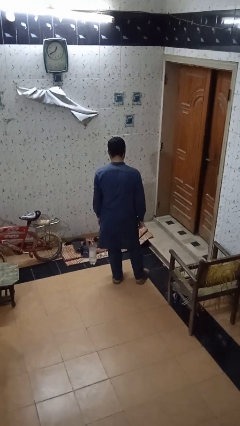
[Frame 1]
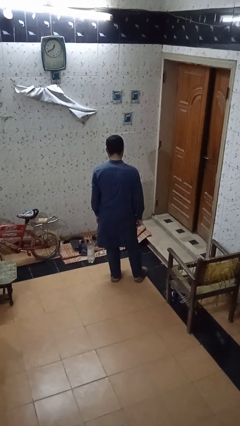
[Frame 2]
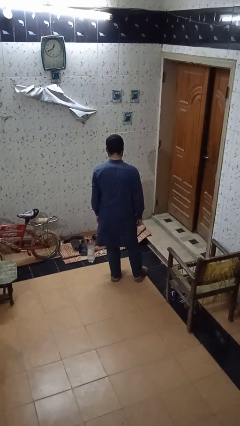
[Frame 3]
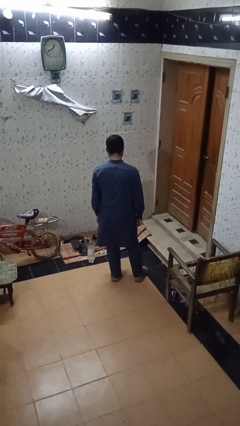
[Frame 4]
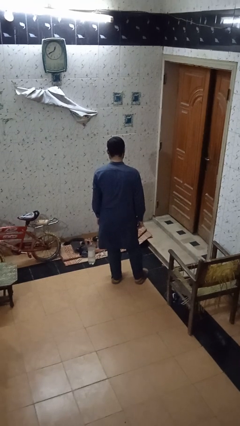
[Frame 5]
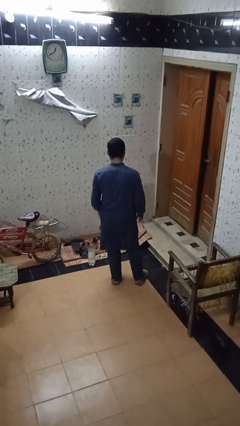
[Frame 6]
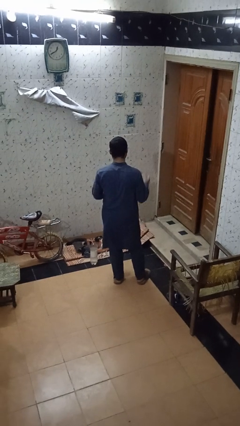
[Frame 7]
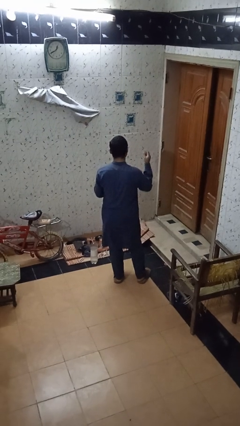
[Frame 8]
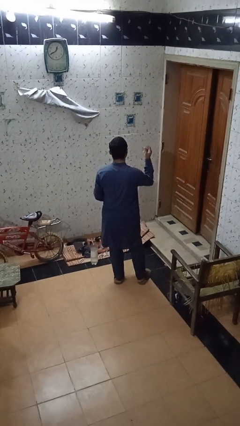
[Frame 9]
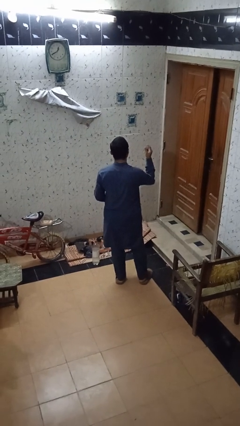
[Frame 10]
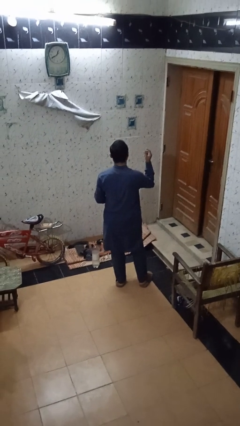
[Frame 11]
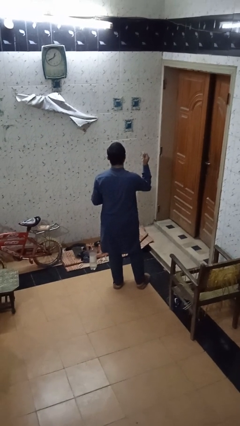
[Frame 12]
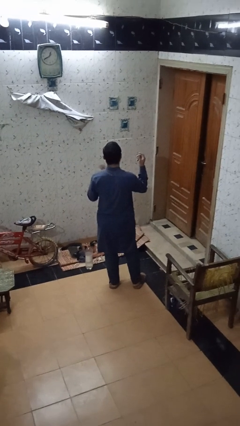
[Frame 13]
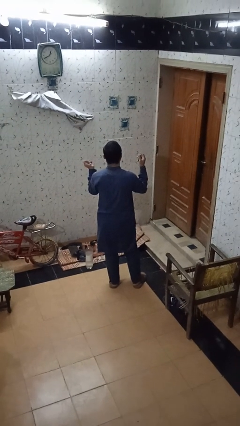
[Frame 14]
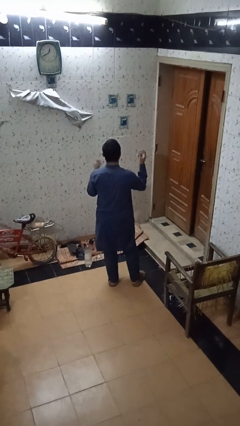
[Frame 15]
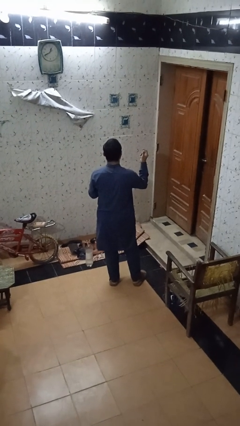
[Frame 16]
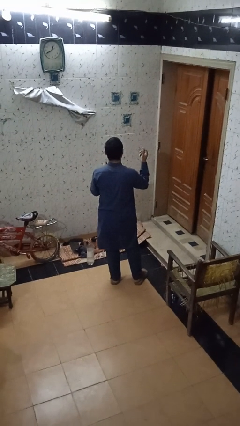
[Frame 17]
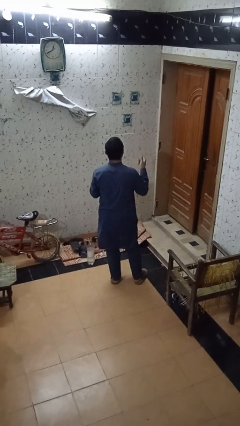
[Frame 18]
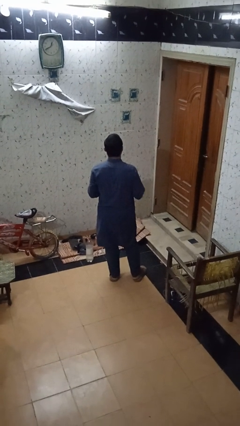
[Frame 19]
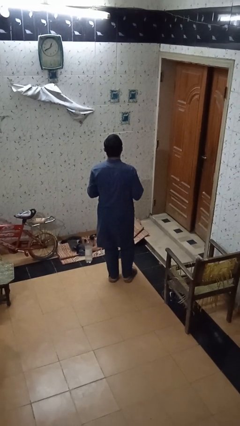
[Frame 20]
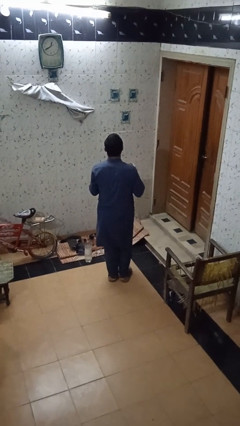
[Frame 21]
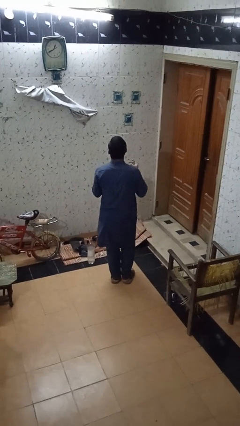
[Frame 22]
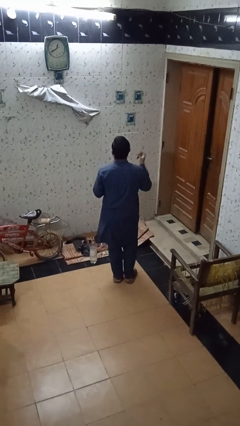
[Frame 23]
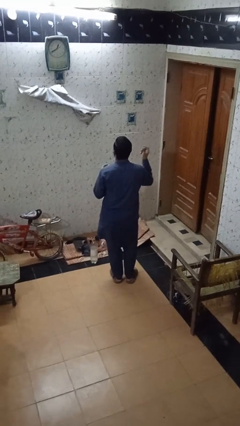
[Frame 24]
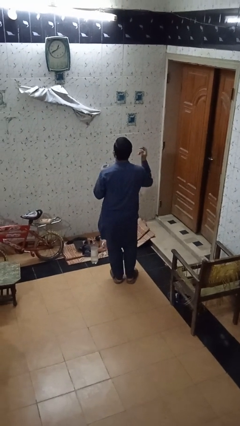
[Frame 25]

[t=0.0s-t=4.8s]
person snaps fingers

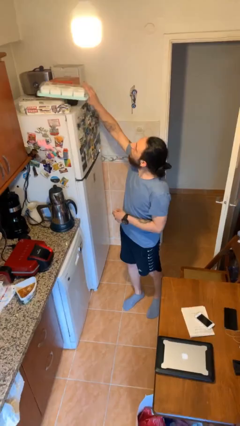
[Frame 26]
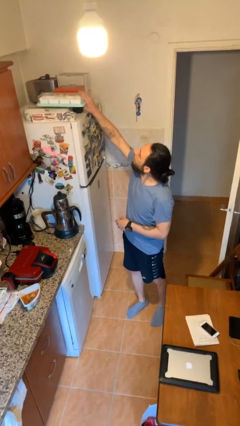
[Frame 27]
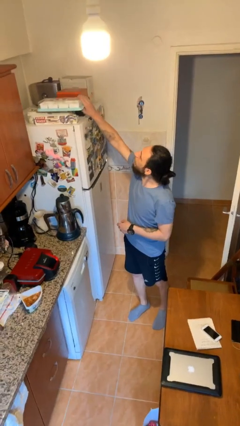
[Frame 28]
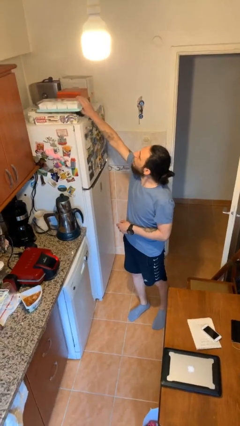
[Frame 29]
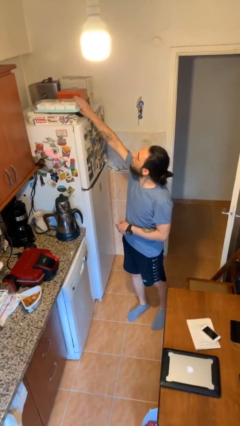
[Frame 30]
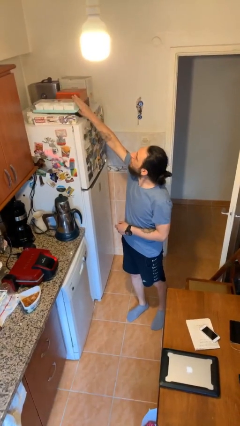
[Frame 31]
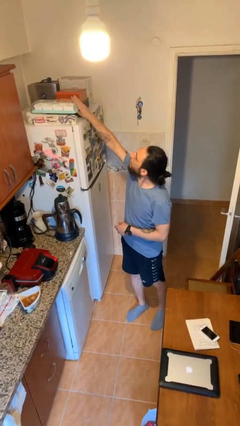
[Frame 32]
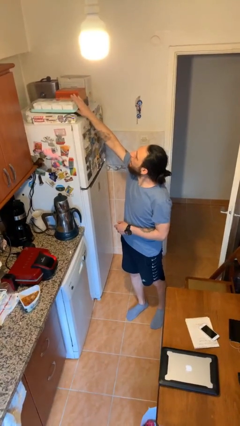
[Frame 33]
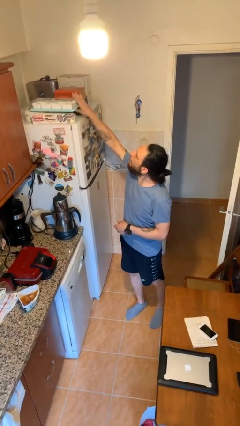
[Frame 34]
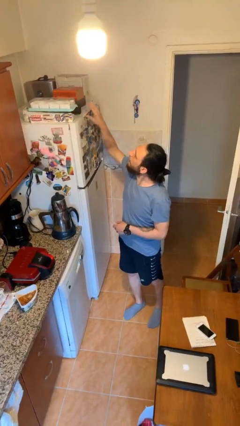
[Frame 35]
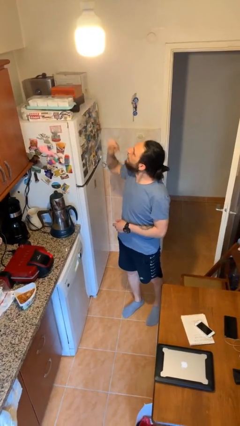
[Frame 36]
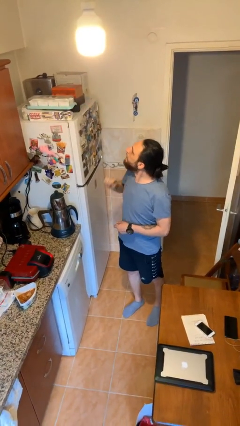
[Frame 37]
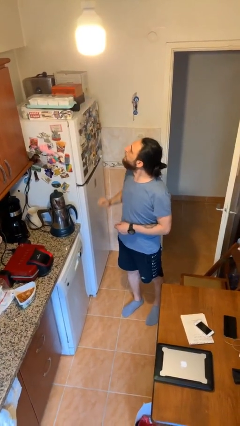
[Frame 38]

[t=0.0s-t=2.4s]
person puts down object on shelf

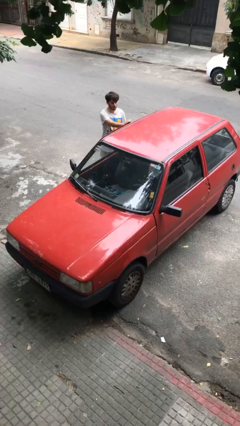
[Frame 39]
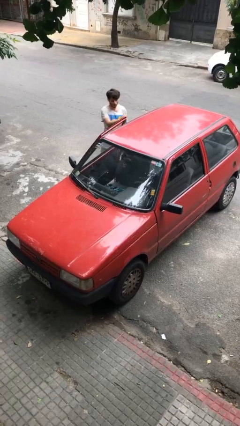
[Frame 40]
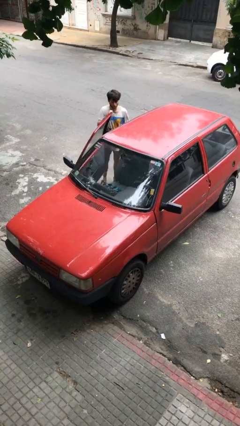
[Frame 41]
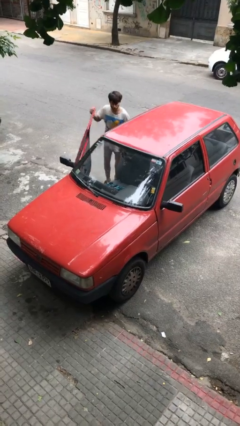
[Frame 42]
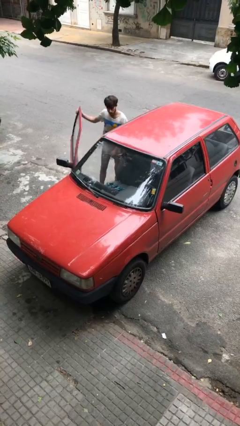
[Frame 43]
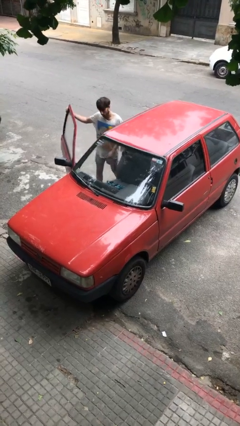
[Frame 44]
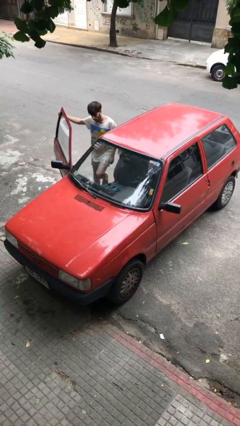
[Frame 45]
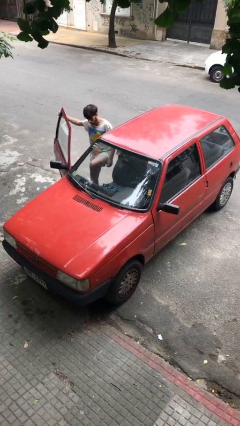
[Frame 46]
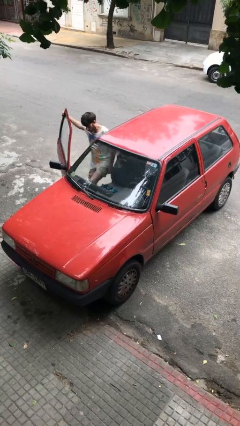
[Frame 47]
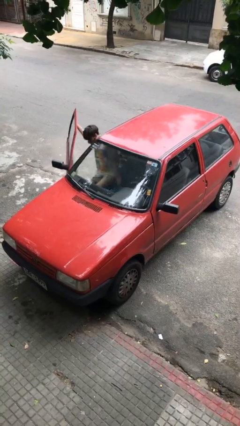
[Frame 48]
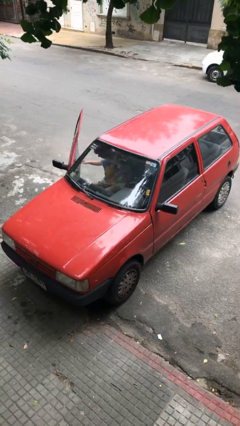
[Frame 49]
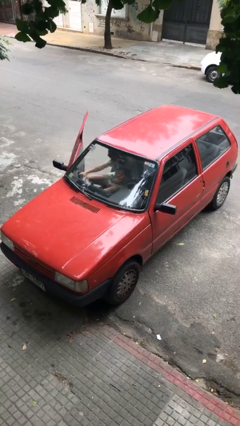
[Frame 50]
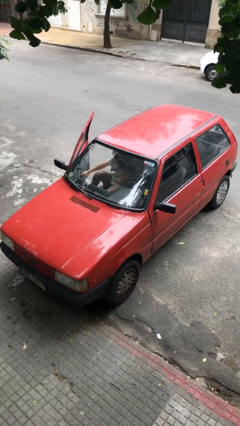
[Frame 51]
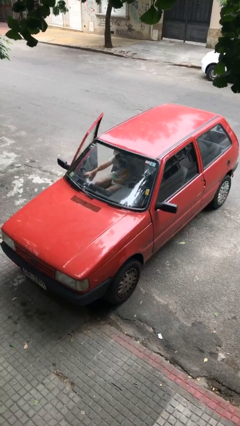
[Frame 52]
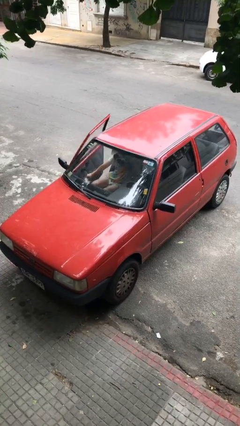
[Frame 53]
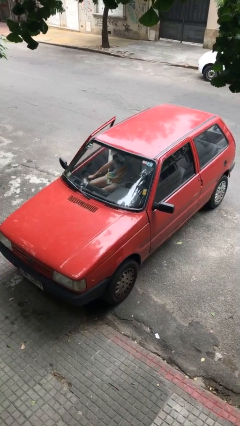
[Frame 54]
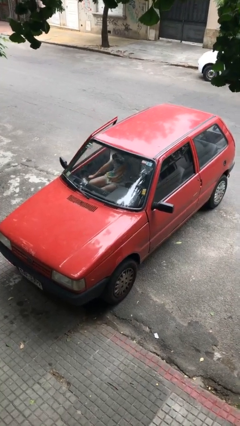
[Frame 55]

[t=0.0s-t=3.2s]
car picks up person

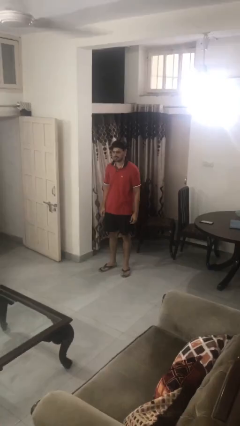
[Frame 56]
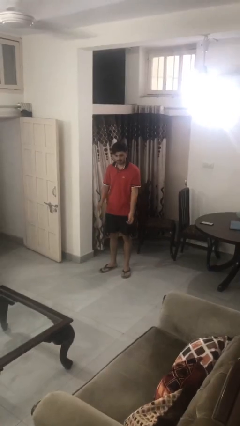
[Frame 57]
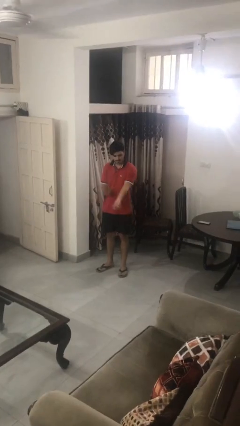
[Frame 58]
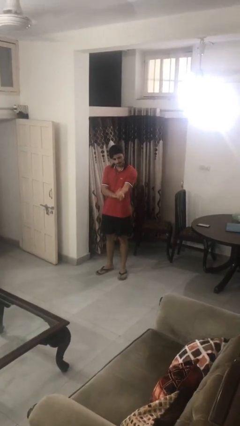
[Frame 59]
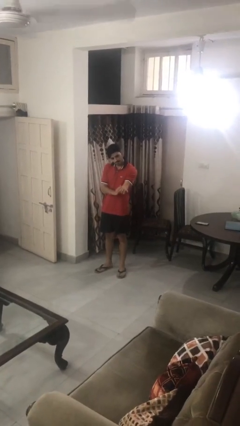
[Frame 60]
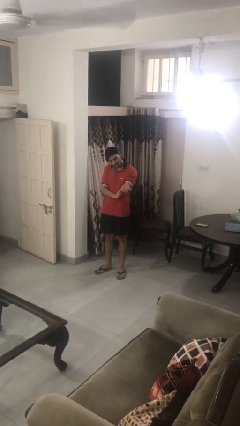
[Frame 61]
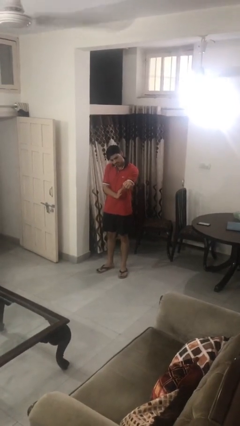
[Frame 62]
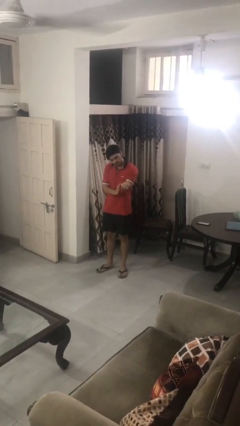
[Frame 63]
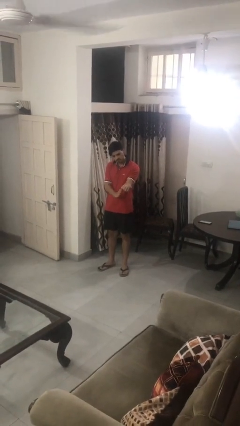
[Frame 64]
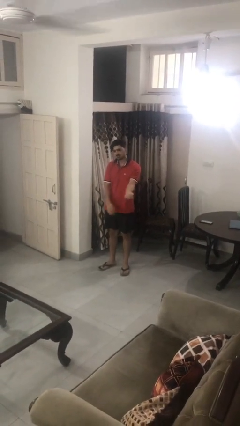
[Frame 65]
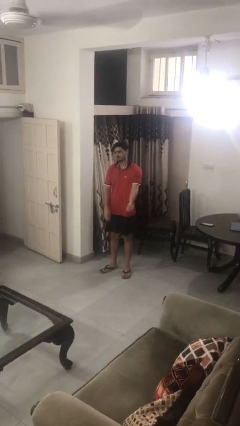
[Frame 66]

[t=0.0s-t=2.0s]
person swats bug

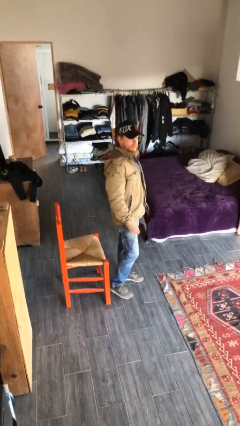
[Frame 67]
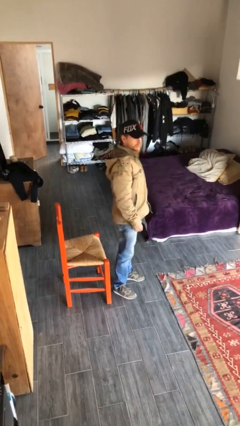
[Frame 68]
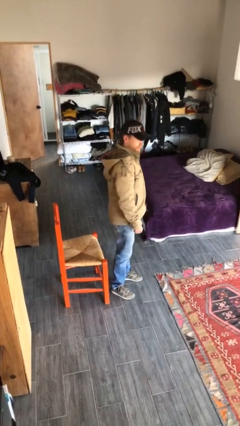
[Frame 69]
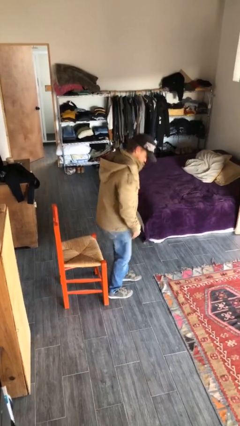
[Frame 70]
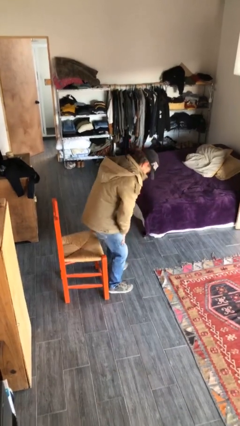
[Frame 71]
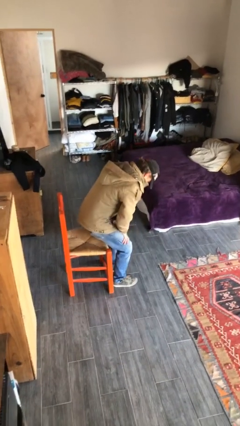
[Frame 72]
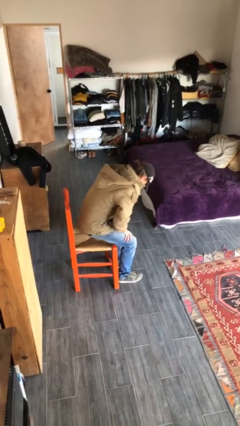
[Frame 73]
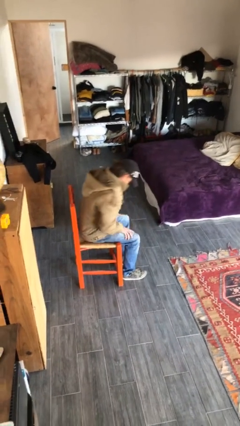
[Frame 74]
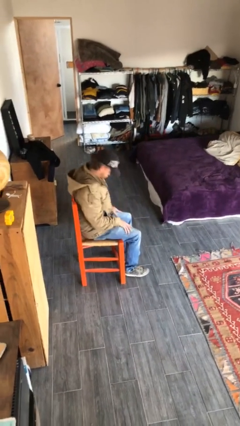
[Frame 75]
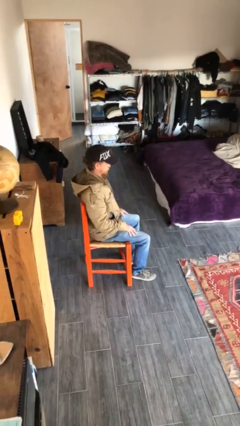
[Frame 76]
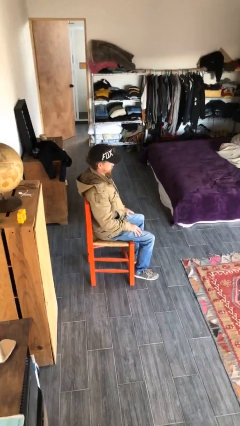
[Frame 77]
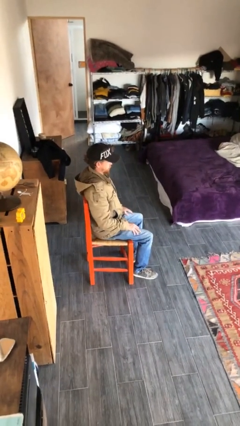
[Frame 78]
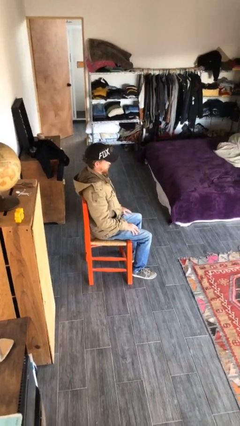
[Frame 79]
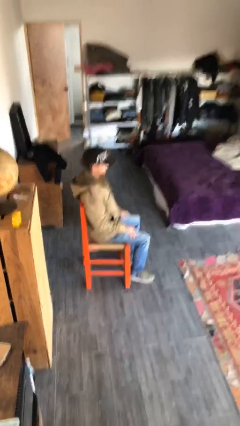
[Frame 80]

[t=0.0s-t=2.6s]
person sits down

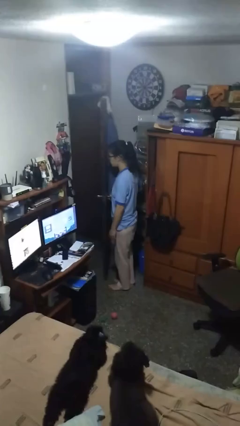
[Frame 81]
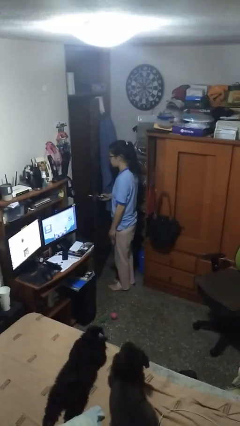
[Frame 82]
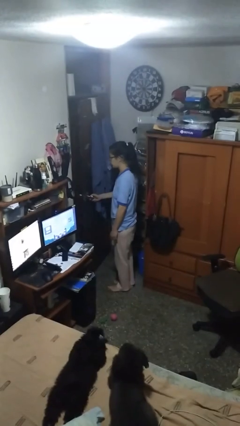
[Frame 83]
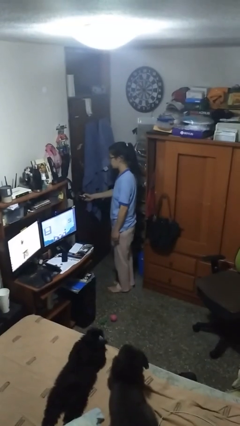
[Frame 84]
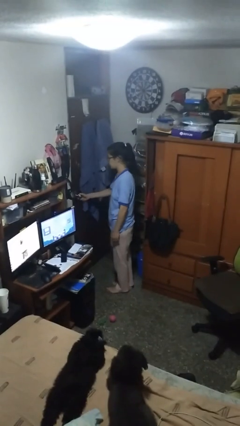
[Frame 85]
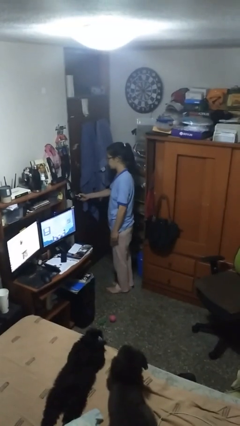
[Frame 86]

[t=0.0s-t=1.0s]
person closes facility door

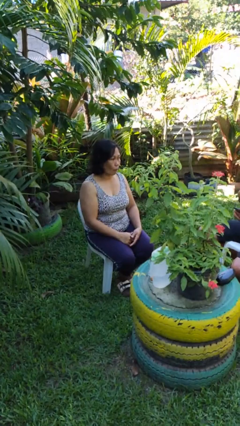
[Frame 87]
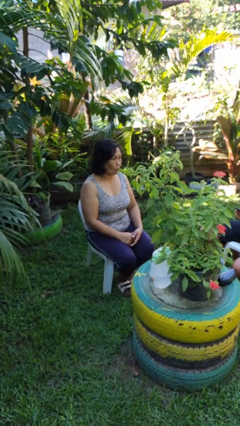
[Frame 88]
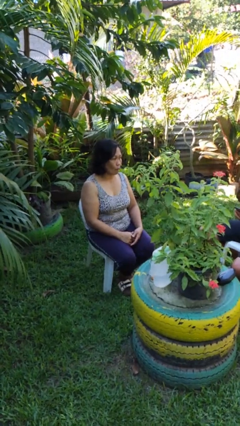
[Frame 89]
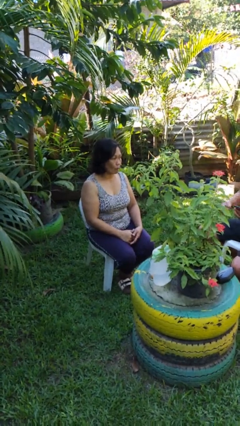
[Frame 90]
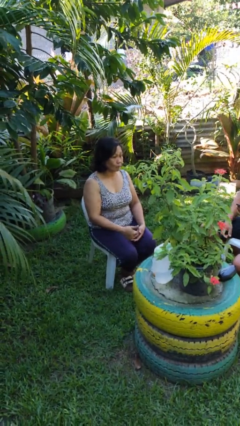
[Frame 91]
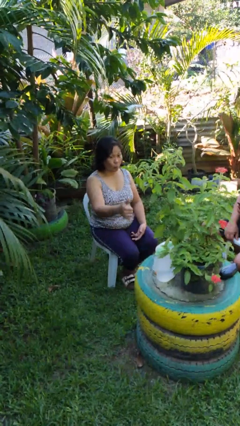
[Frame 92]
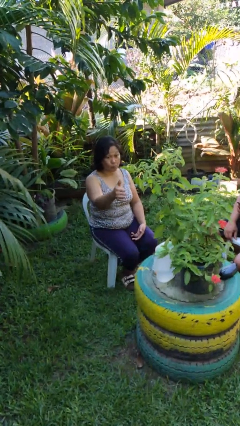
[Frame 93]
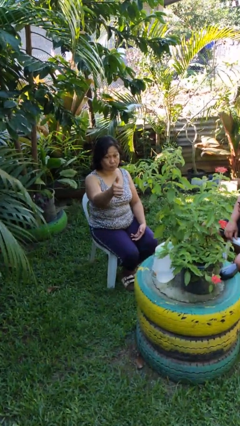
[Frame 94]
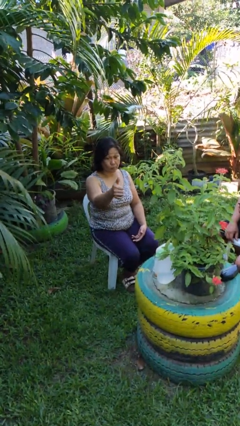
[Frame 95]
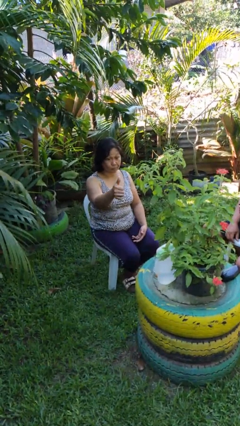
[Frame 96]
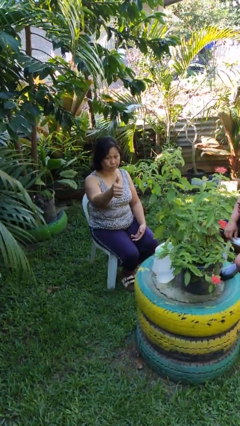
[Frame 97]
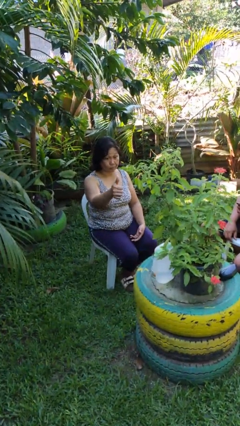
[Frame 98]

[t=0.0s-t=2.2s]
person gestures thumbs up
